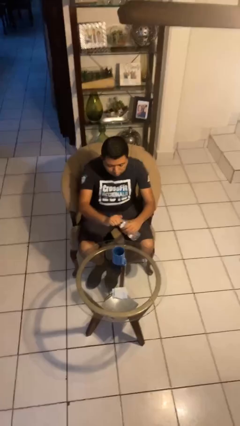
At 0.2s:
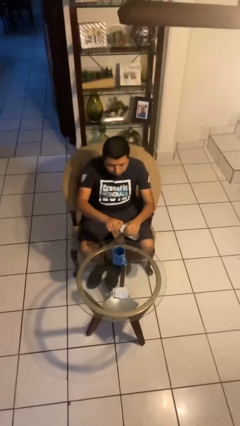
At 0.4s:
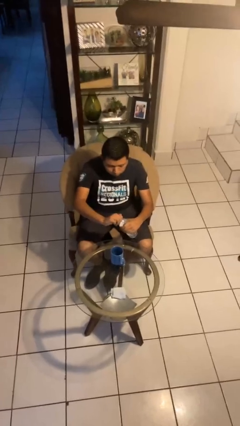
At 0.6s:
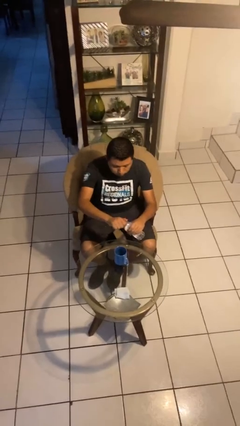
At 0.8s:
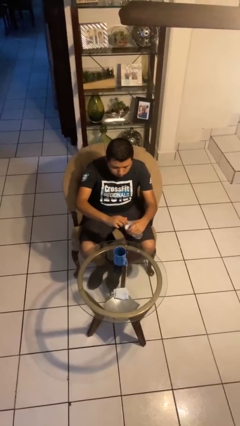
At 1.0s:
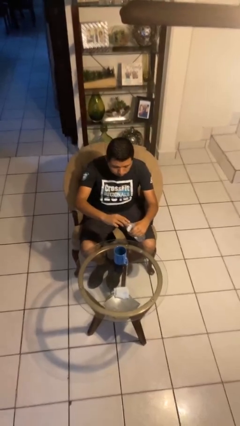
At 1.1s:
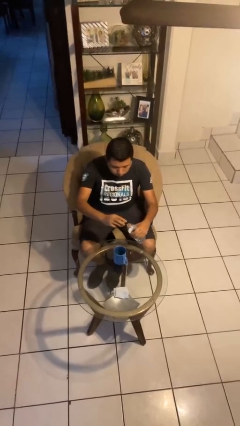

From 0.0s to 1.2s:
person unscrews lid from bottle

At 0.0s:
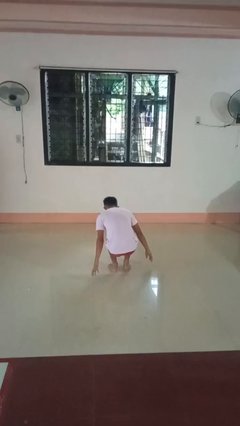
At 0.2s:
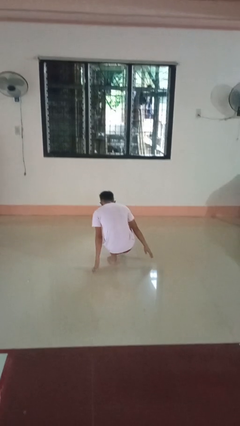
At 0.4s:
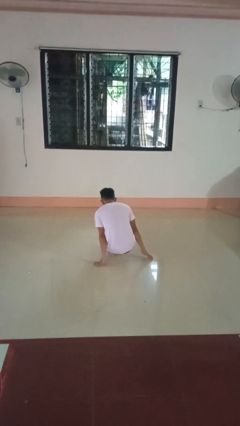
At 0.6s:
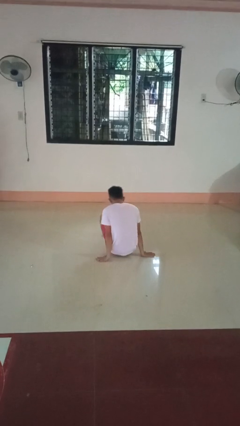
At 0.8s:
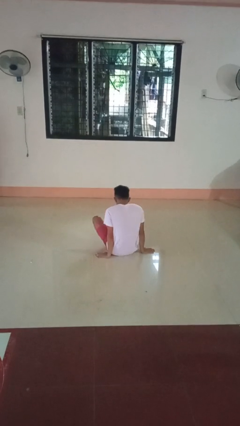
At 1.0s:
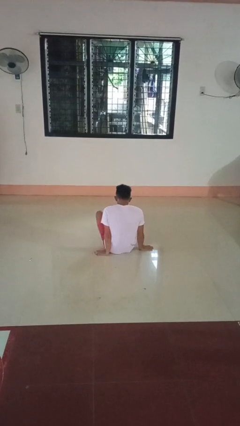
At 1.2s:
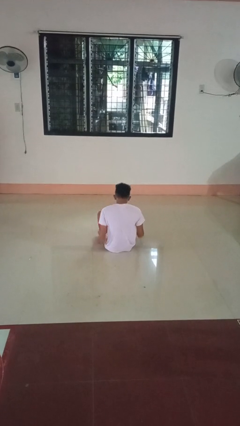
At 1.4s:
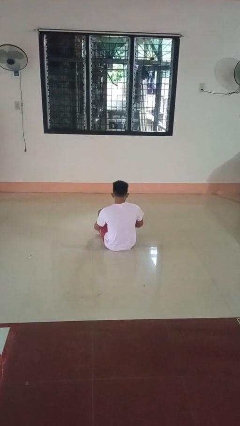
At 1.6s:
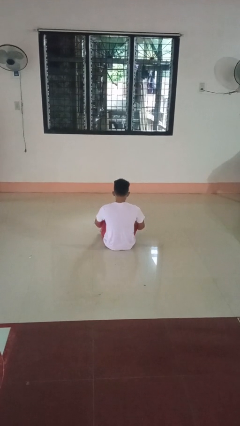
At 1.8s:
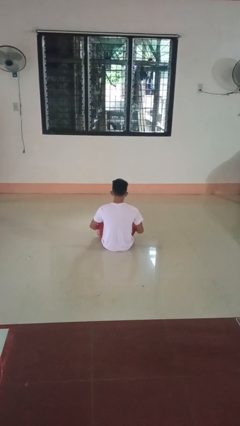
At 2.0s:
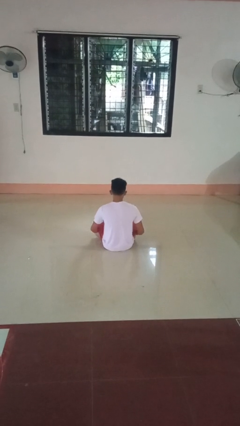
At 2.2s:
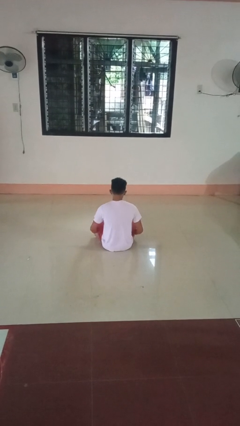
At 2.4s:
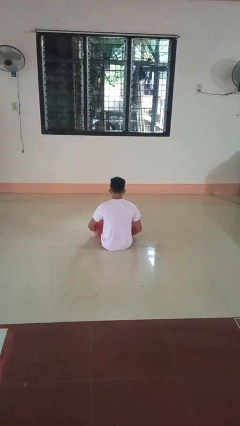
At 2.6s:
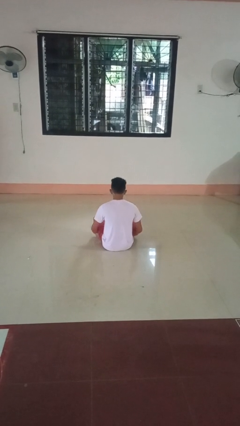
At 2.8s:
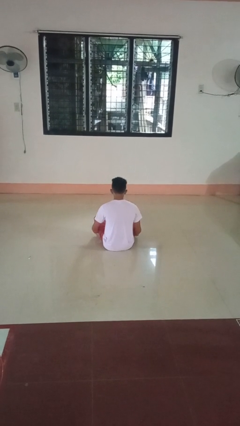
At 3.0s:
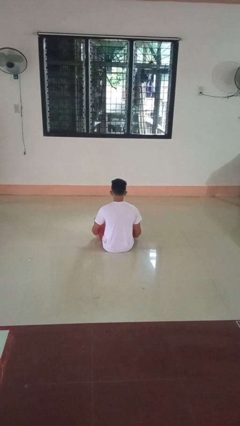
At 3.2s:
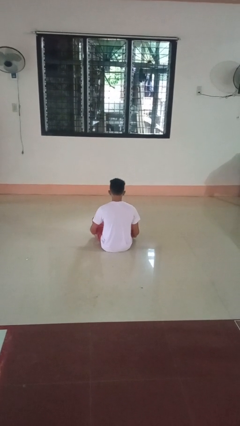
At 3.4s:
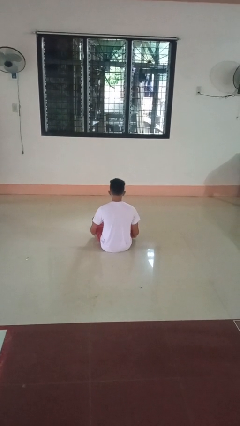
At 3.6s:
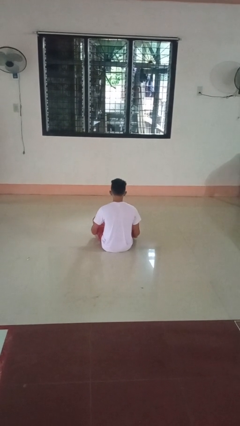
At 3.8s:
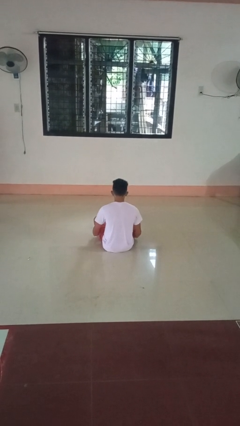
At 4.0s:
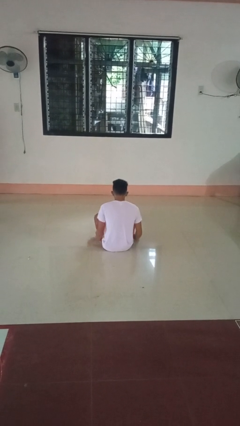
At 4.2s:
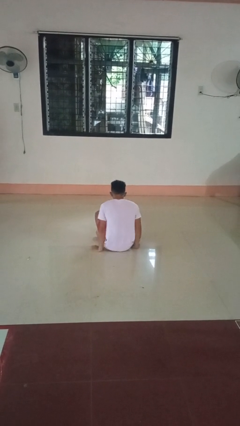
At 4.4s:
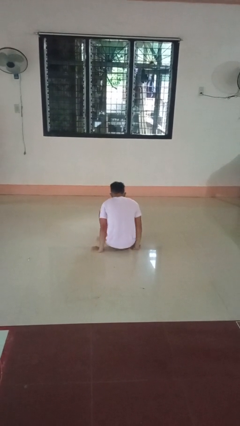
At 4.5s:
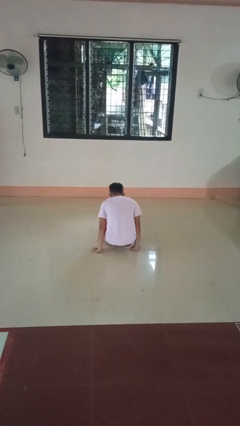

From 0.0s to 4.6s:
person sits crisscross

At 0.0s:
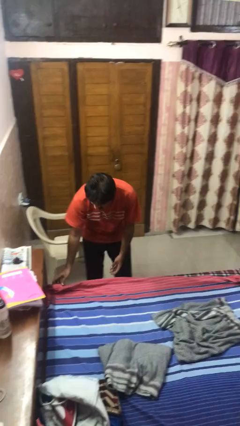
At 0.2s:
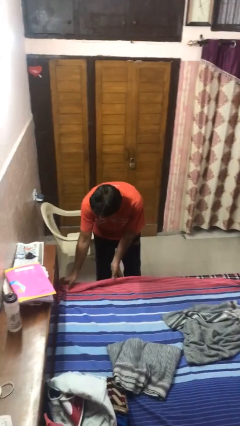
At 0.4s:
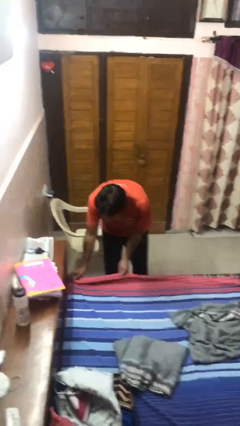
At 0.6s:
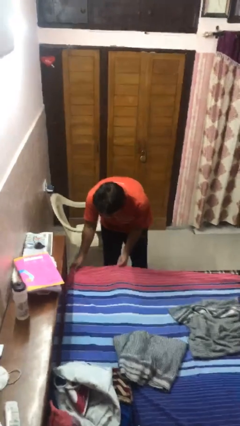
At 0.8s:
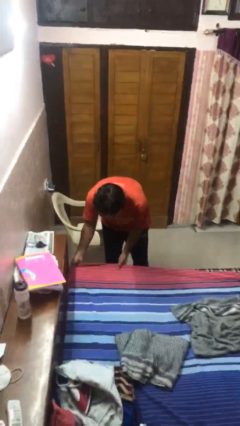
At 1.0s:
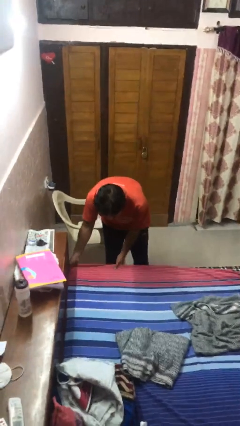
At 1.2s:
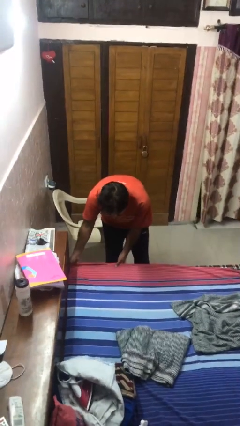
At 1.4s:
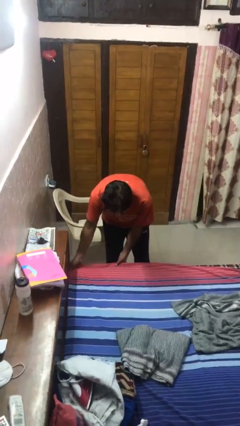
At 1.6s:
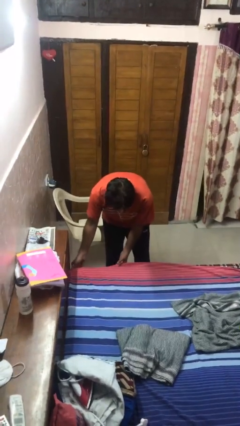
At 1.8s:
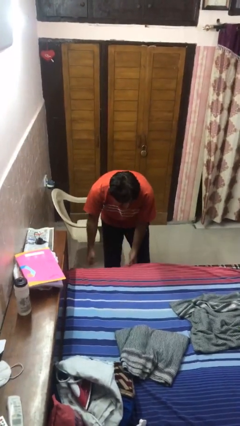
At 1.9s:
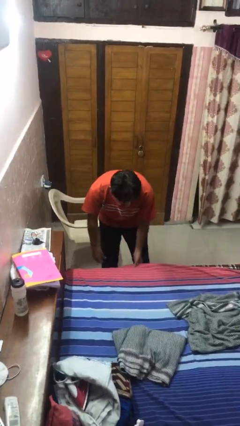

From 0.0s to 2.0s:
person makes bed

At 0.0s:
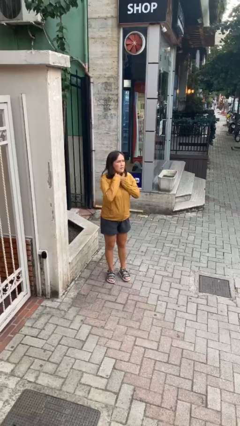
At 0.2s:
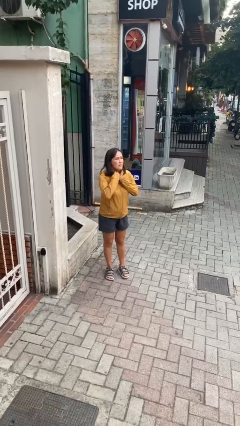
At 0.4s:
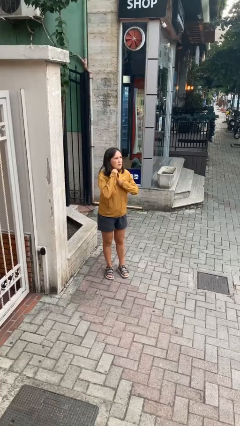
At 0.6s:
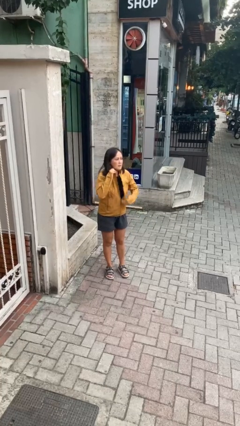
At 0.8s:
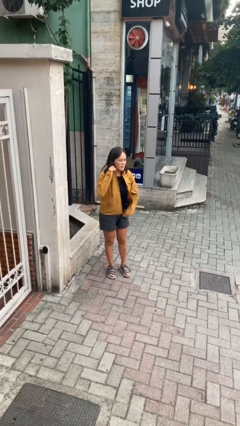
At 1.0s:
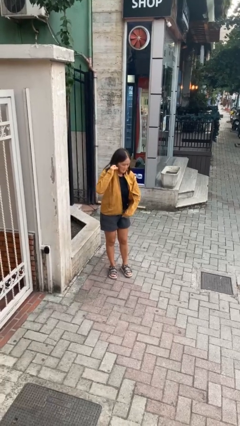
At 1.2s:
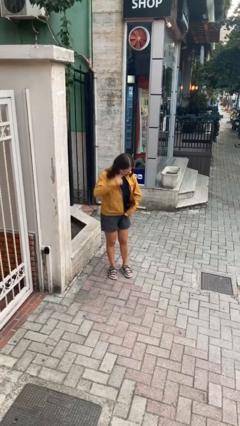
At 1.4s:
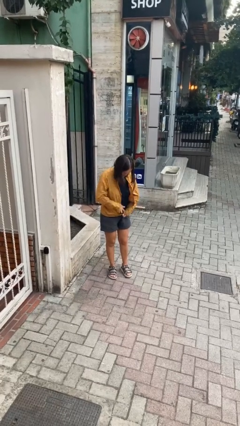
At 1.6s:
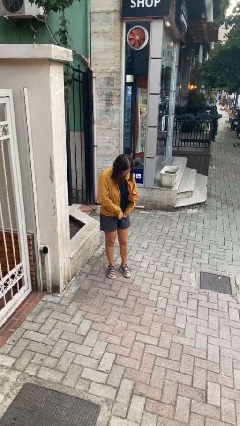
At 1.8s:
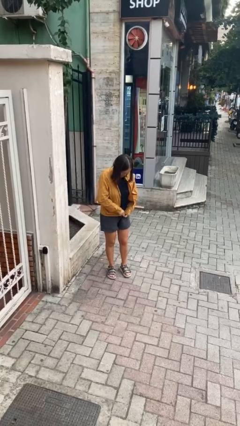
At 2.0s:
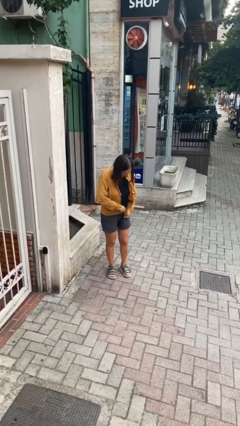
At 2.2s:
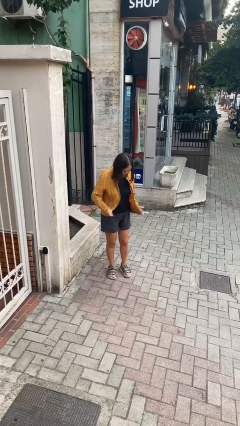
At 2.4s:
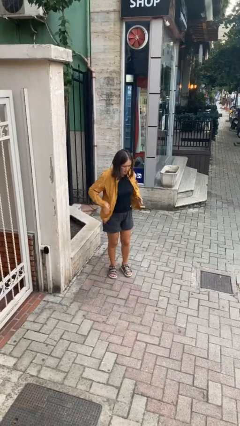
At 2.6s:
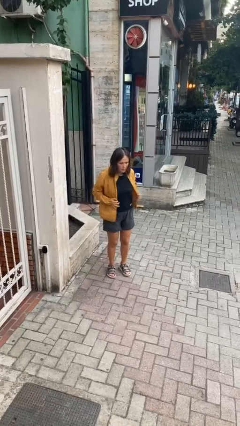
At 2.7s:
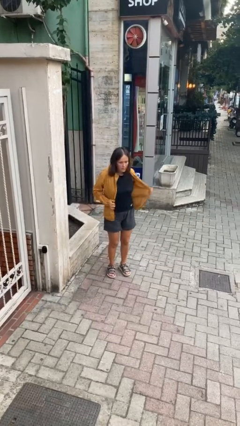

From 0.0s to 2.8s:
person unzips jacket

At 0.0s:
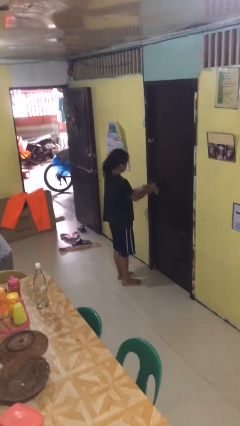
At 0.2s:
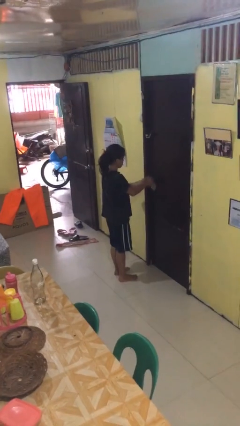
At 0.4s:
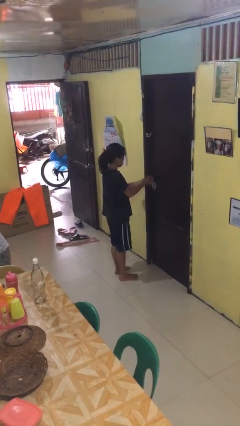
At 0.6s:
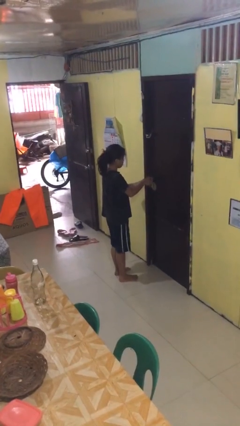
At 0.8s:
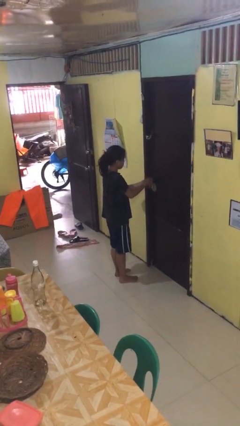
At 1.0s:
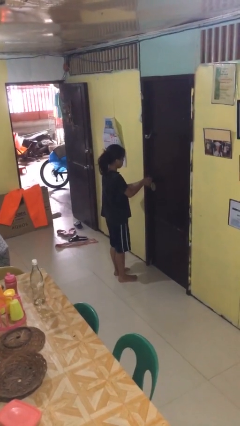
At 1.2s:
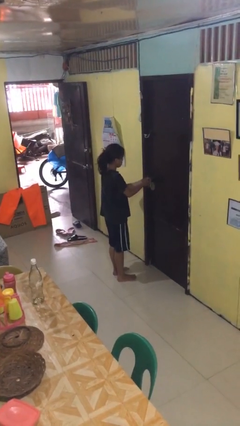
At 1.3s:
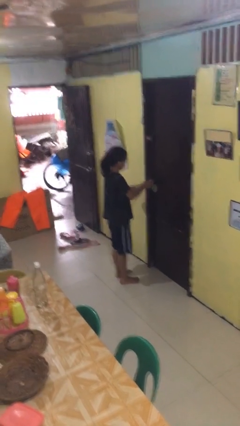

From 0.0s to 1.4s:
person locks door with keys

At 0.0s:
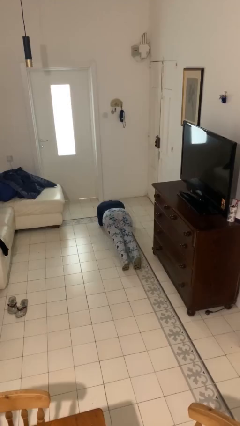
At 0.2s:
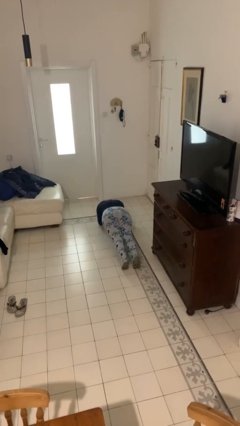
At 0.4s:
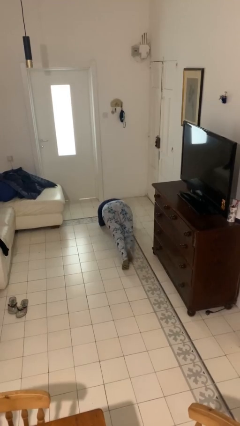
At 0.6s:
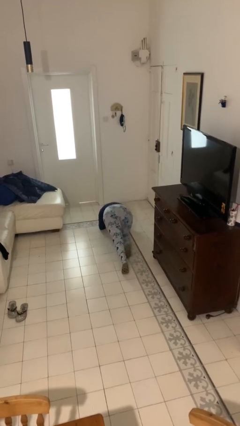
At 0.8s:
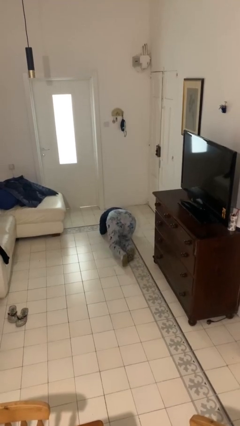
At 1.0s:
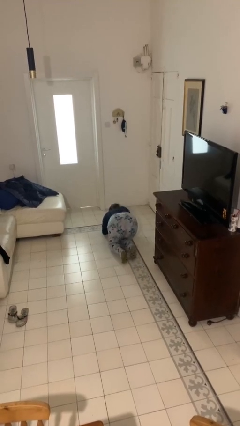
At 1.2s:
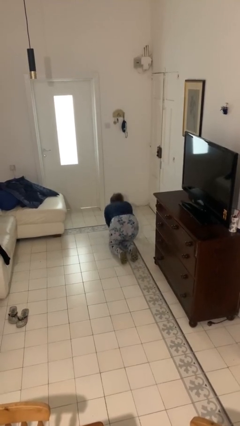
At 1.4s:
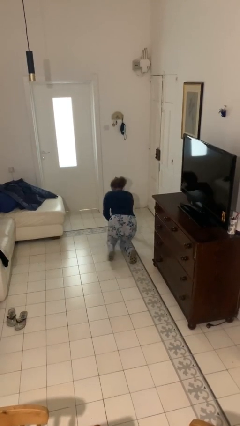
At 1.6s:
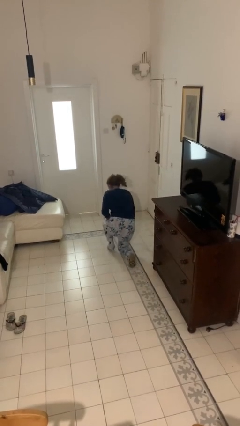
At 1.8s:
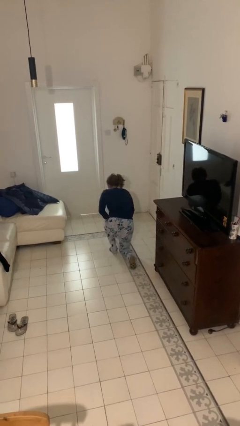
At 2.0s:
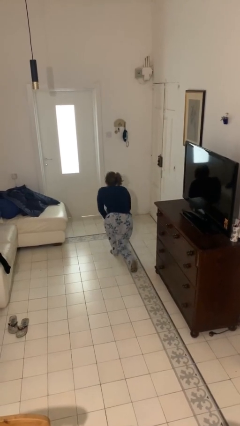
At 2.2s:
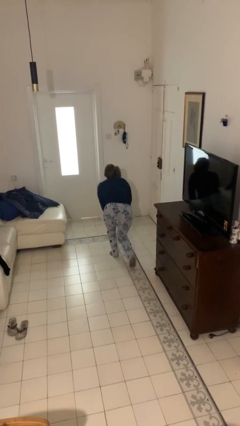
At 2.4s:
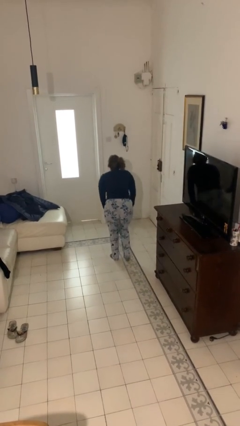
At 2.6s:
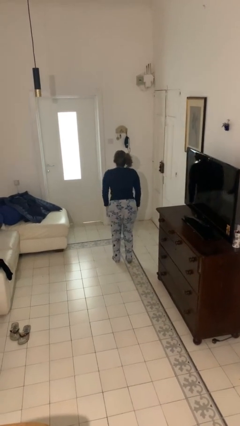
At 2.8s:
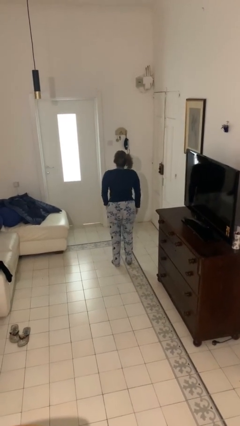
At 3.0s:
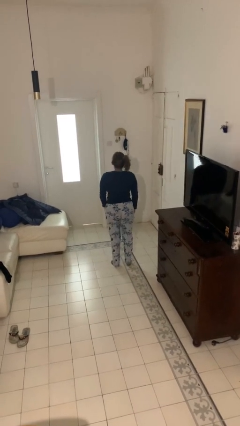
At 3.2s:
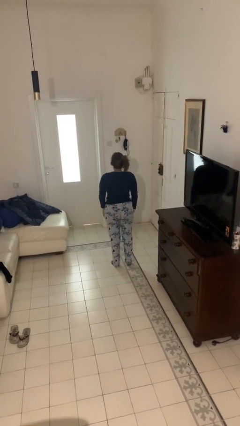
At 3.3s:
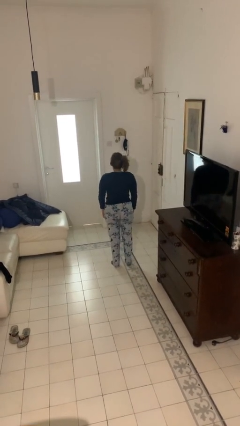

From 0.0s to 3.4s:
person stands up from floor

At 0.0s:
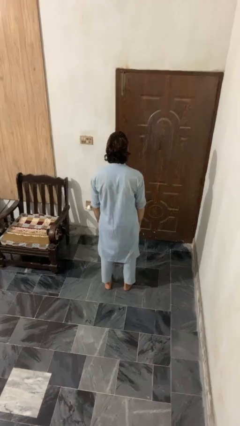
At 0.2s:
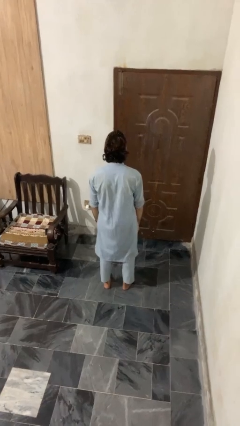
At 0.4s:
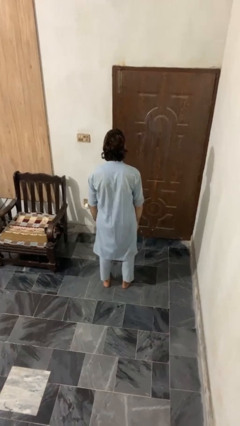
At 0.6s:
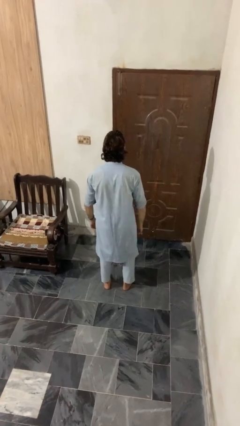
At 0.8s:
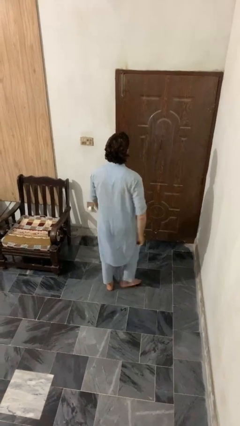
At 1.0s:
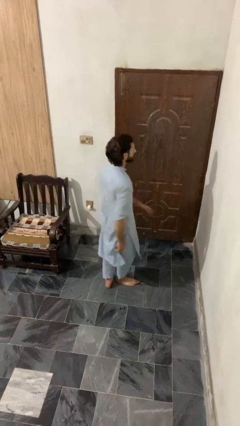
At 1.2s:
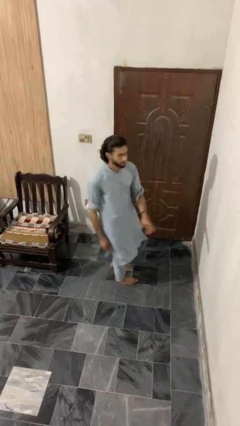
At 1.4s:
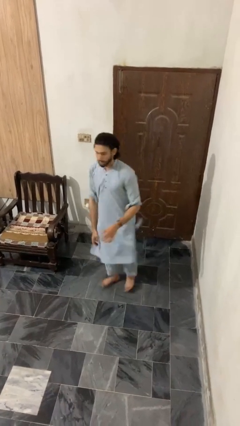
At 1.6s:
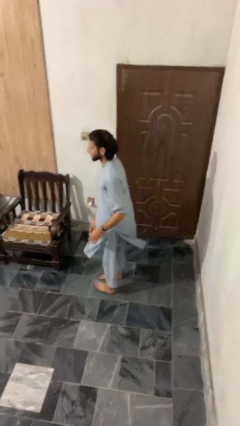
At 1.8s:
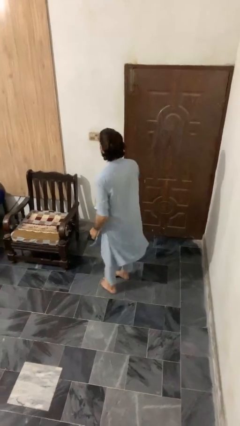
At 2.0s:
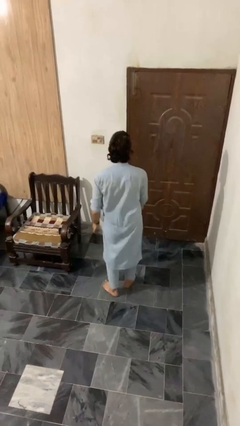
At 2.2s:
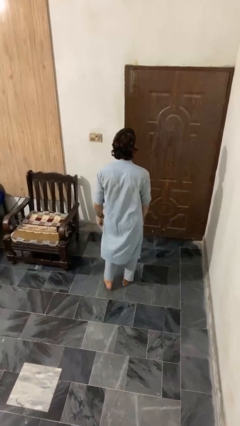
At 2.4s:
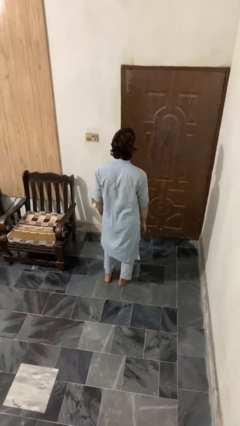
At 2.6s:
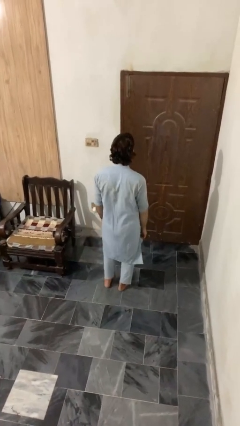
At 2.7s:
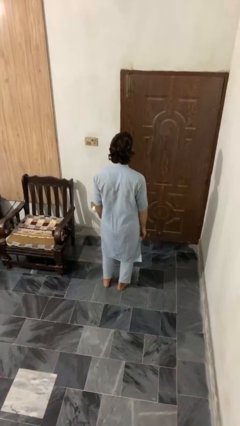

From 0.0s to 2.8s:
person twirls
